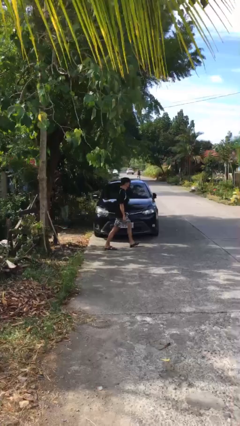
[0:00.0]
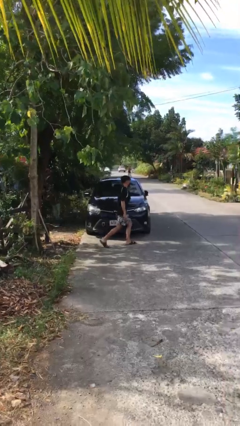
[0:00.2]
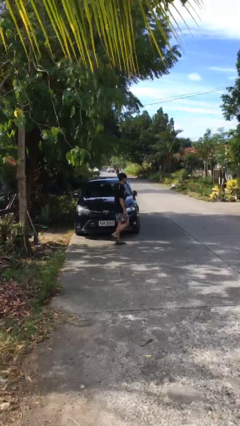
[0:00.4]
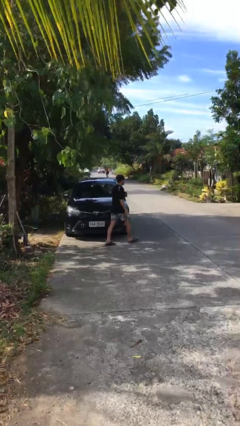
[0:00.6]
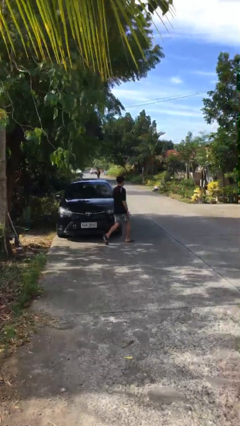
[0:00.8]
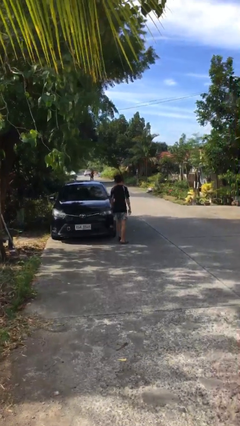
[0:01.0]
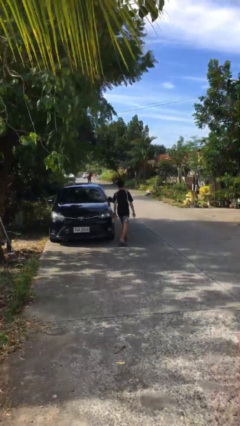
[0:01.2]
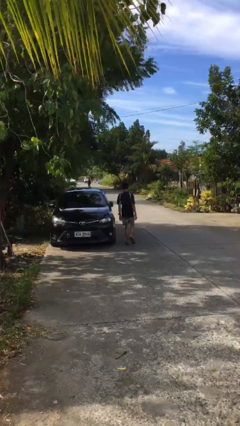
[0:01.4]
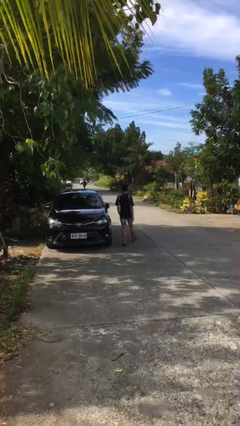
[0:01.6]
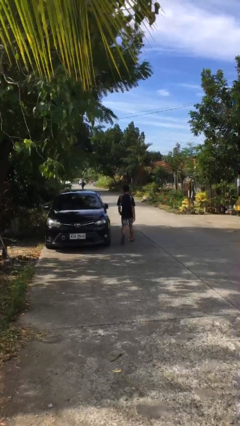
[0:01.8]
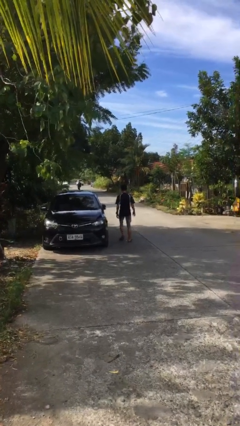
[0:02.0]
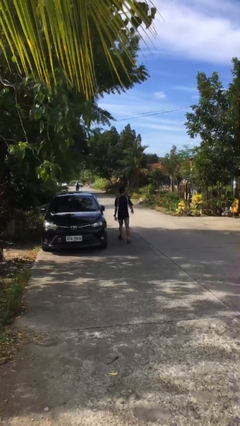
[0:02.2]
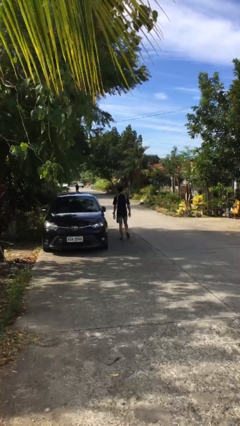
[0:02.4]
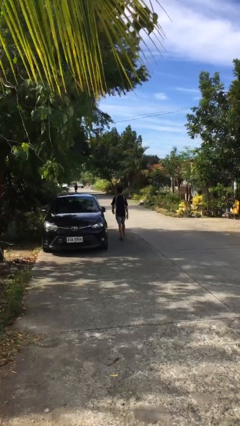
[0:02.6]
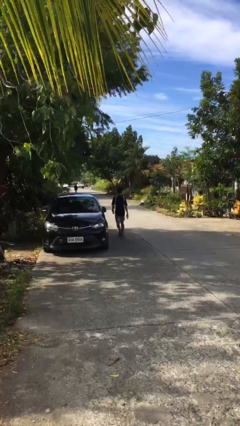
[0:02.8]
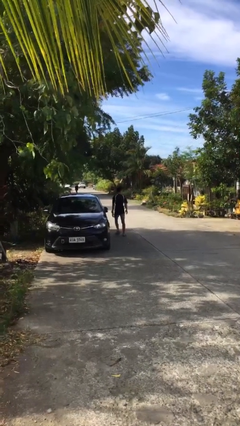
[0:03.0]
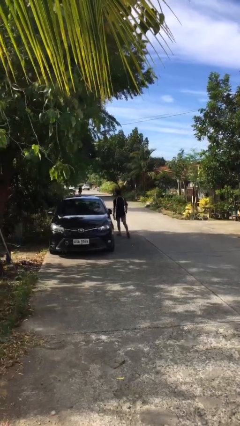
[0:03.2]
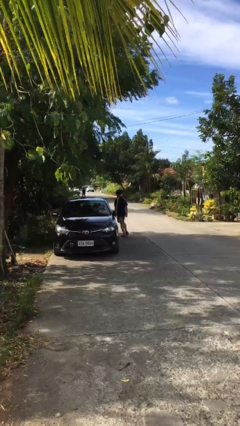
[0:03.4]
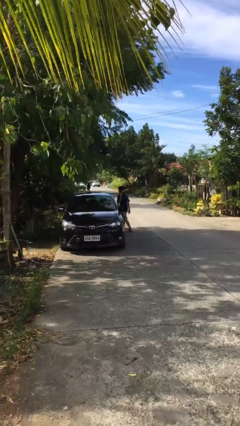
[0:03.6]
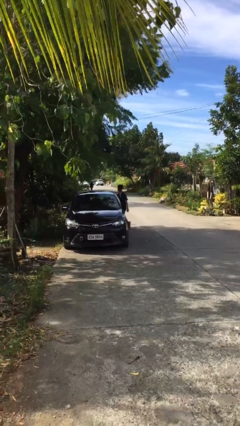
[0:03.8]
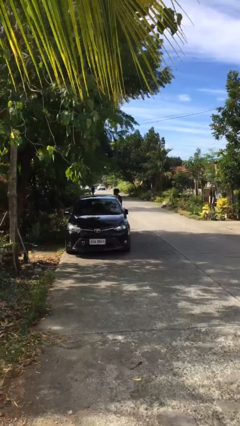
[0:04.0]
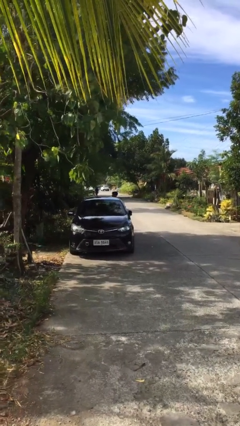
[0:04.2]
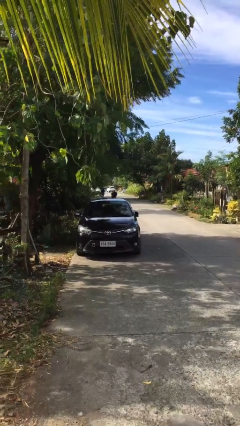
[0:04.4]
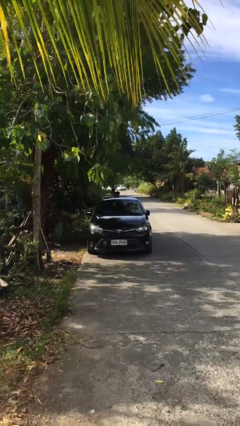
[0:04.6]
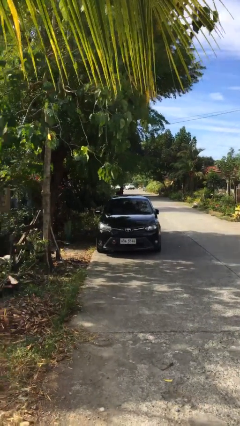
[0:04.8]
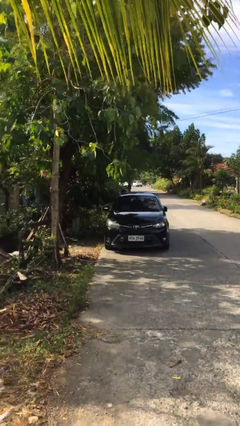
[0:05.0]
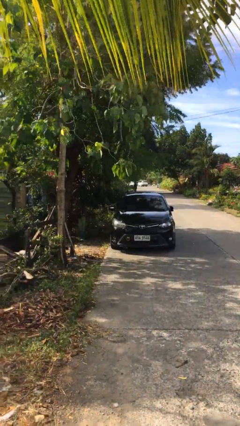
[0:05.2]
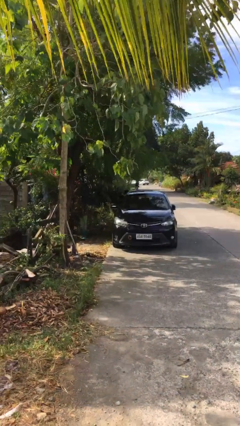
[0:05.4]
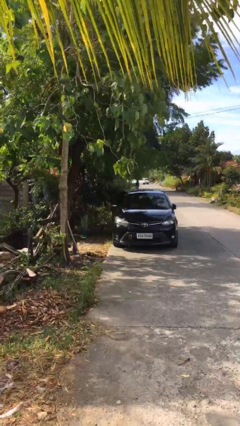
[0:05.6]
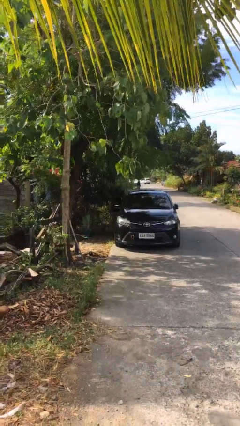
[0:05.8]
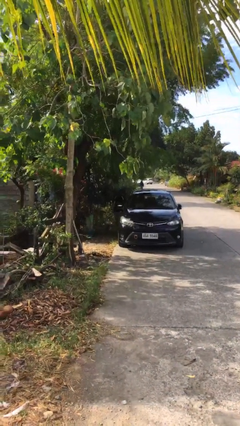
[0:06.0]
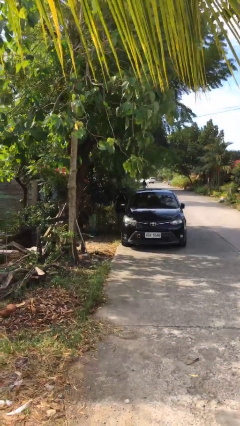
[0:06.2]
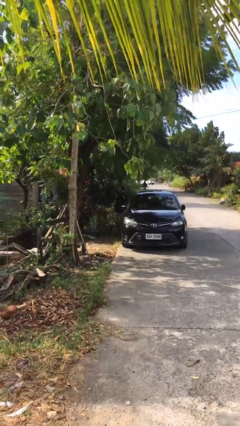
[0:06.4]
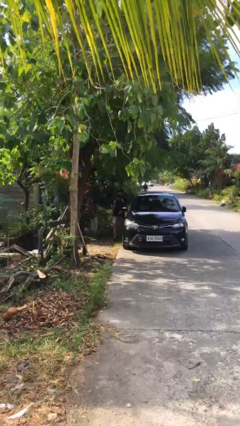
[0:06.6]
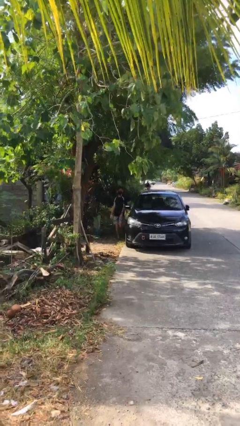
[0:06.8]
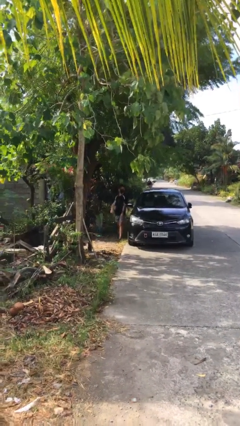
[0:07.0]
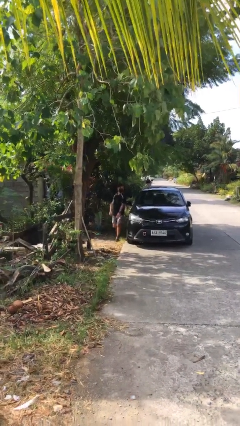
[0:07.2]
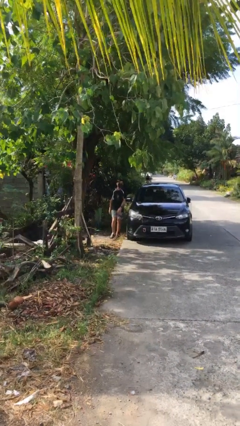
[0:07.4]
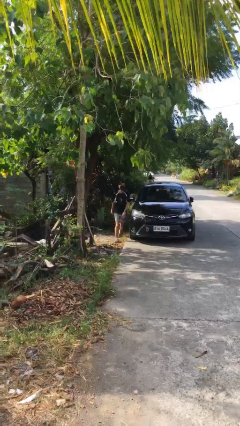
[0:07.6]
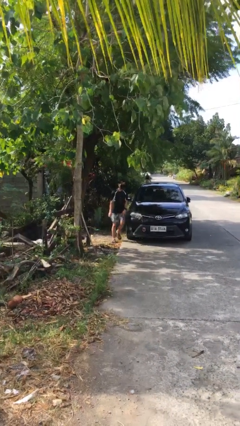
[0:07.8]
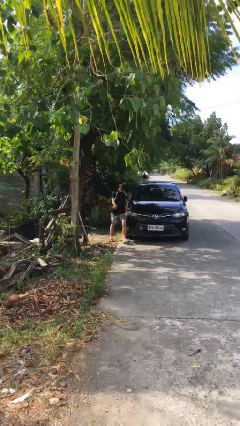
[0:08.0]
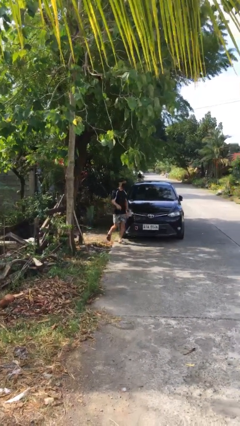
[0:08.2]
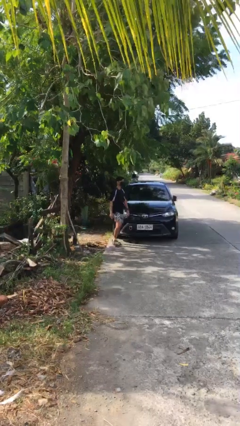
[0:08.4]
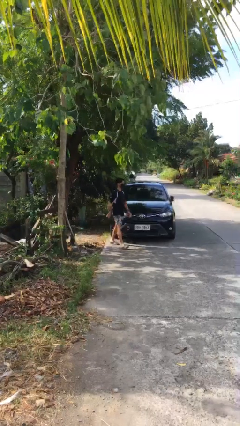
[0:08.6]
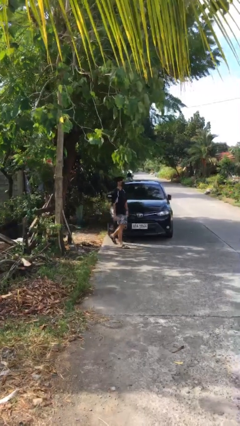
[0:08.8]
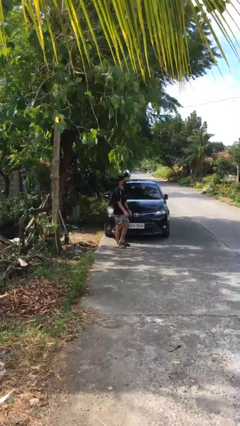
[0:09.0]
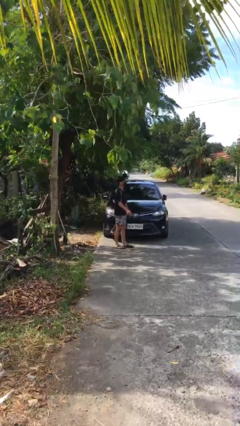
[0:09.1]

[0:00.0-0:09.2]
person walks around car

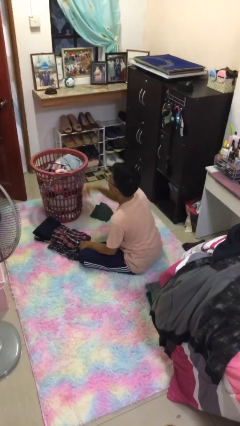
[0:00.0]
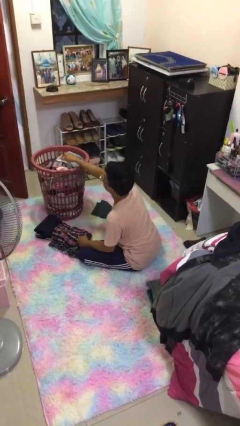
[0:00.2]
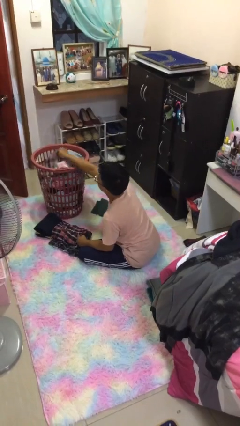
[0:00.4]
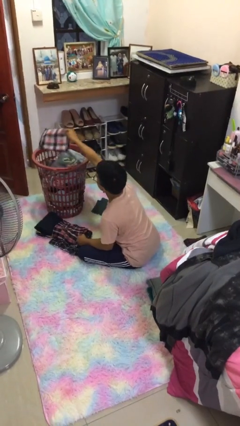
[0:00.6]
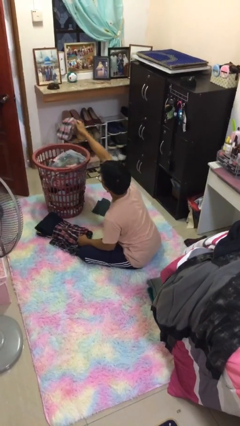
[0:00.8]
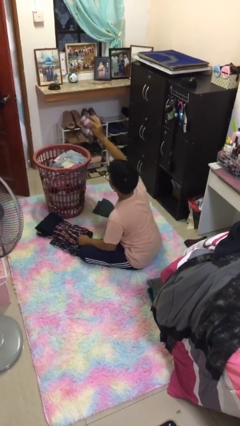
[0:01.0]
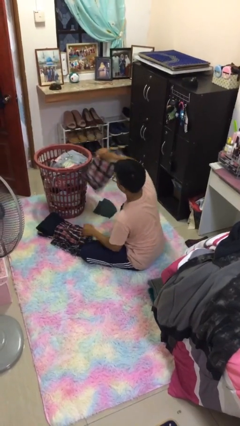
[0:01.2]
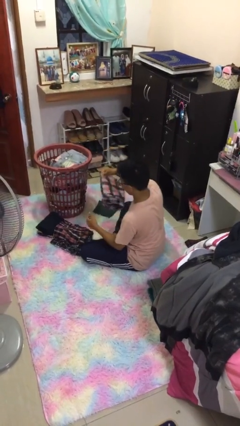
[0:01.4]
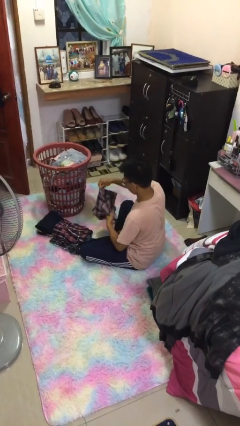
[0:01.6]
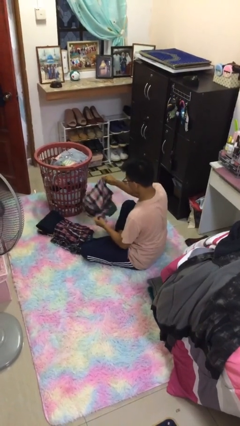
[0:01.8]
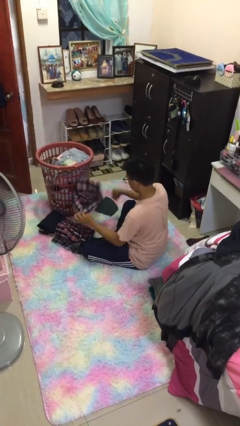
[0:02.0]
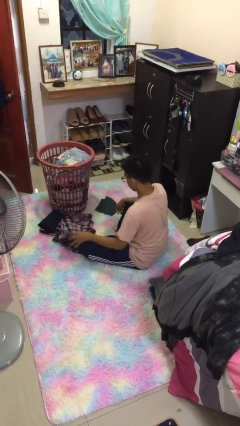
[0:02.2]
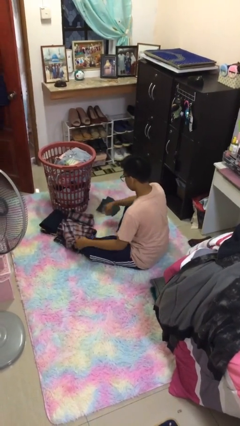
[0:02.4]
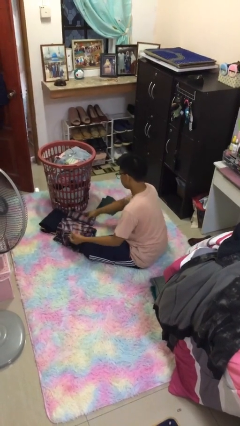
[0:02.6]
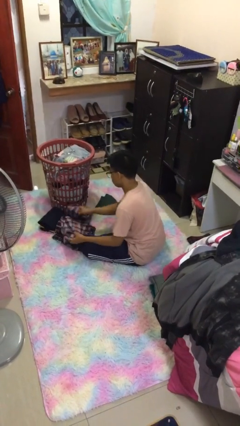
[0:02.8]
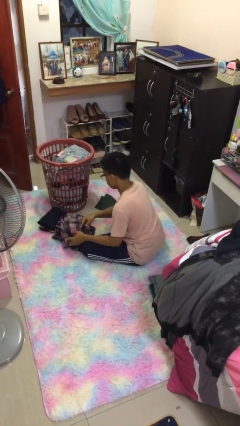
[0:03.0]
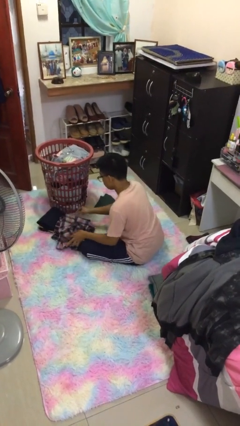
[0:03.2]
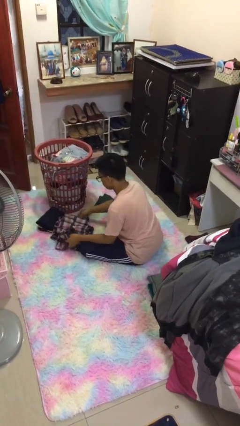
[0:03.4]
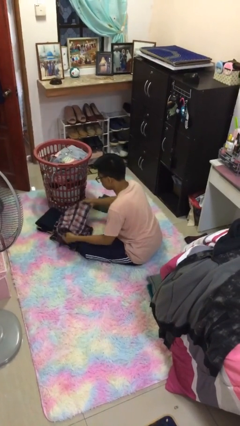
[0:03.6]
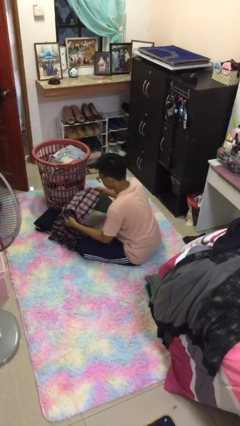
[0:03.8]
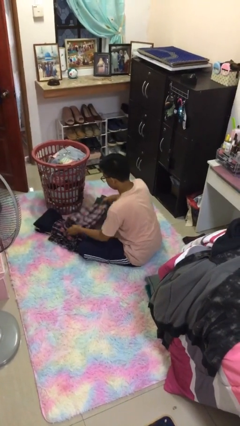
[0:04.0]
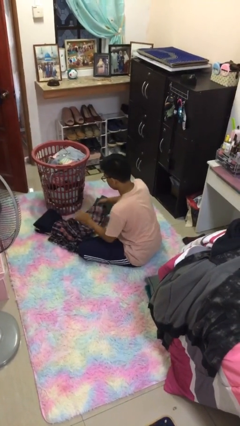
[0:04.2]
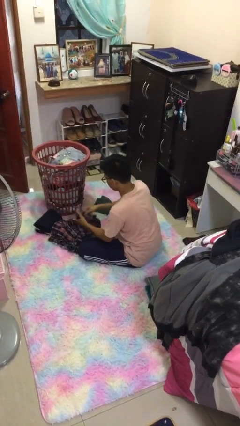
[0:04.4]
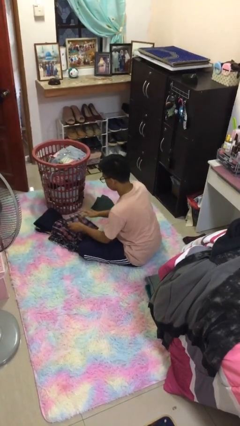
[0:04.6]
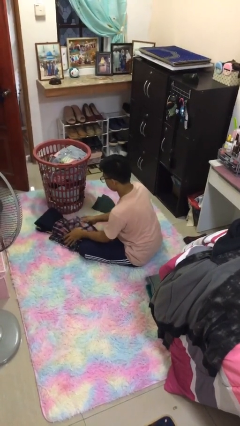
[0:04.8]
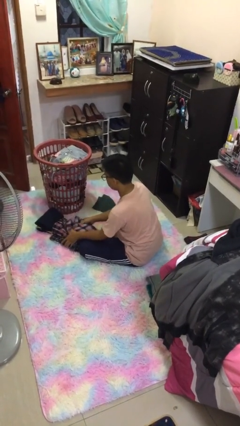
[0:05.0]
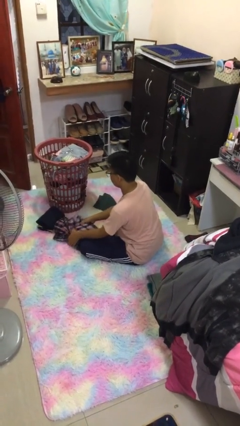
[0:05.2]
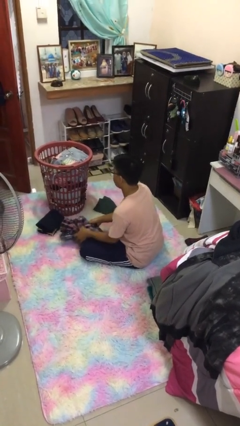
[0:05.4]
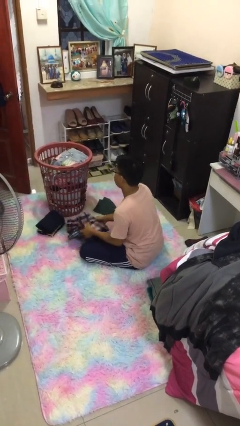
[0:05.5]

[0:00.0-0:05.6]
person folds pants

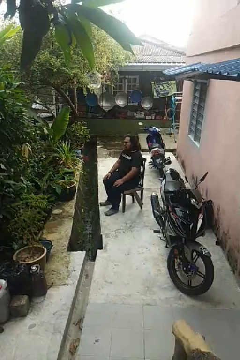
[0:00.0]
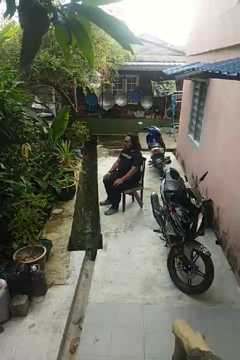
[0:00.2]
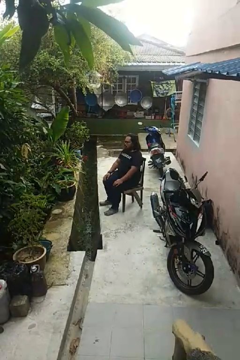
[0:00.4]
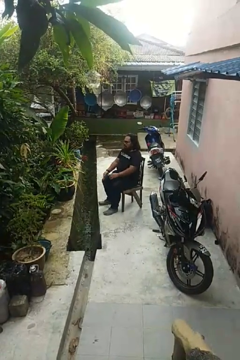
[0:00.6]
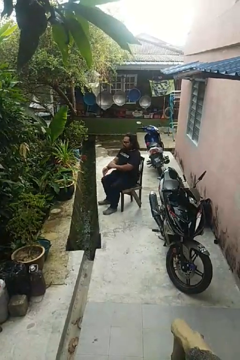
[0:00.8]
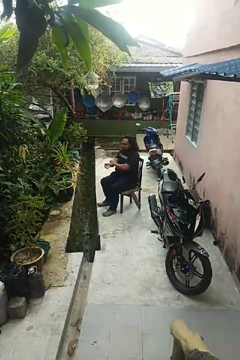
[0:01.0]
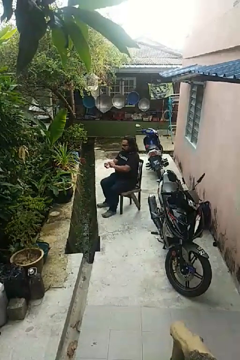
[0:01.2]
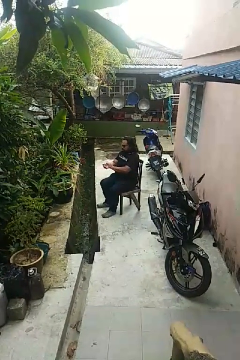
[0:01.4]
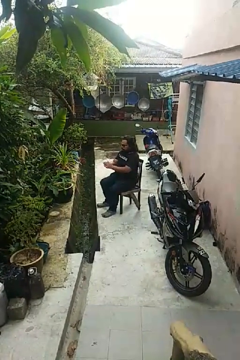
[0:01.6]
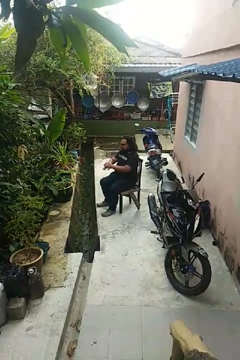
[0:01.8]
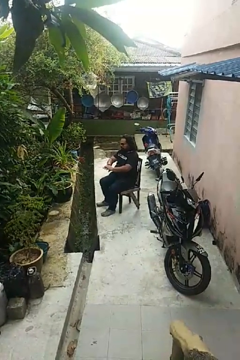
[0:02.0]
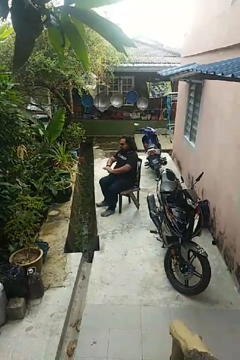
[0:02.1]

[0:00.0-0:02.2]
person looks at hands in lap

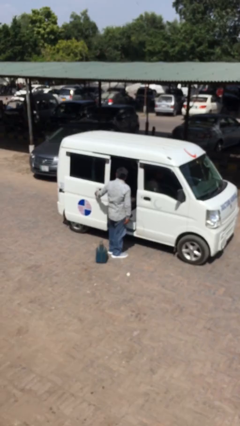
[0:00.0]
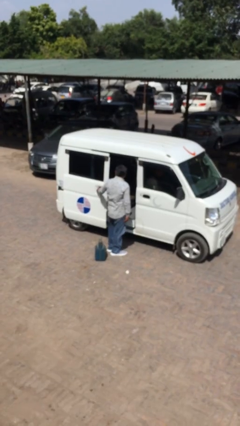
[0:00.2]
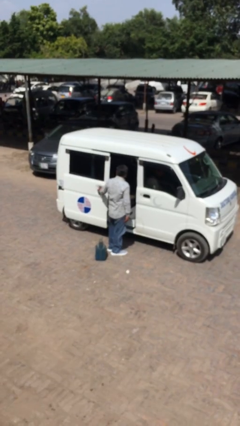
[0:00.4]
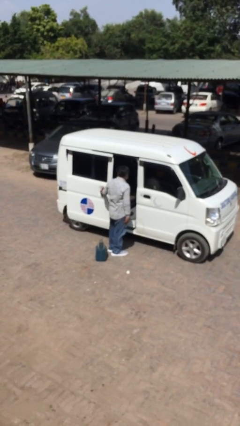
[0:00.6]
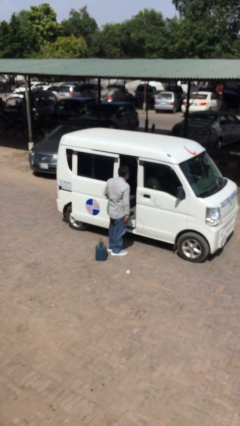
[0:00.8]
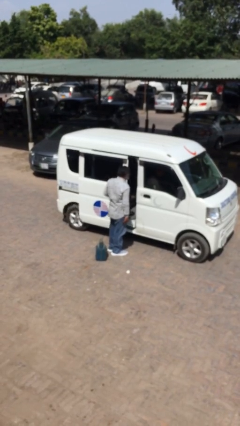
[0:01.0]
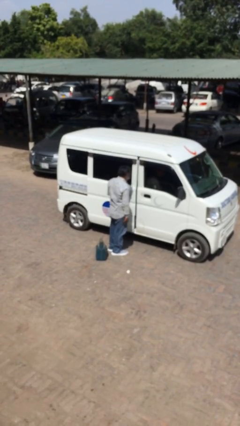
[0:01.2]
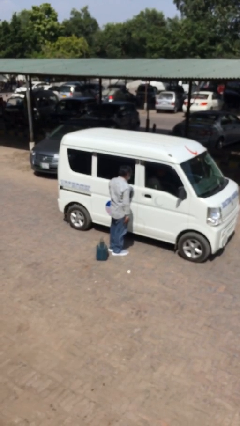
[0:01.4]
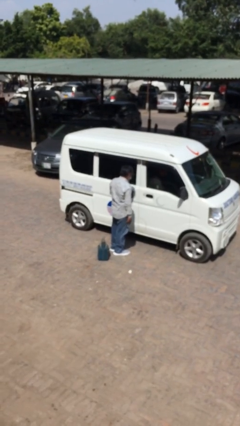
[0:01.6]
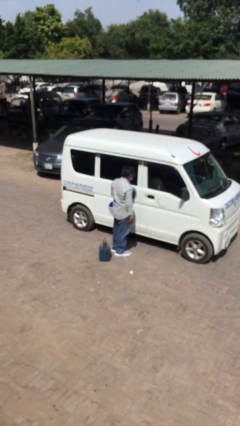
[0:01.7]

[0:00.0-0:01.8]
person closes car door
